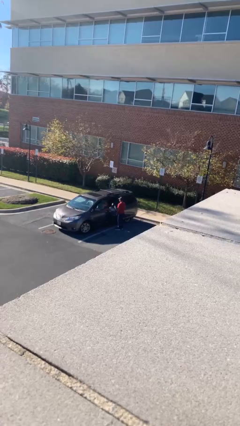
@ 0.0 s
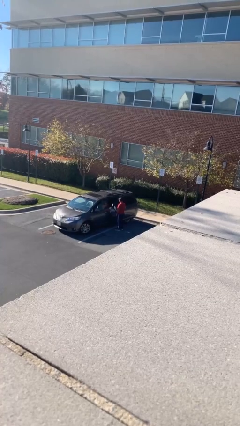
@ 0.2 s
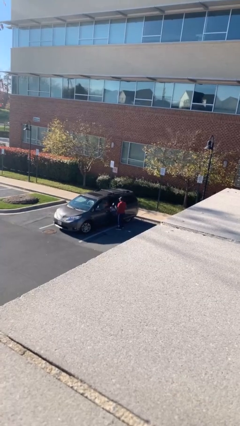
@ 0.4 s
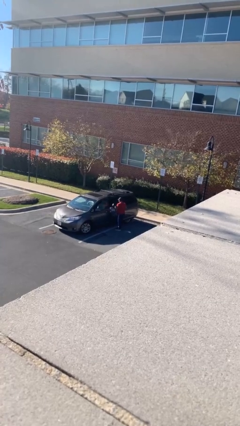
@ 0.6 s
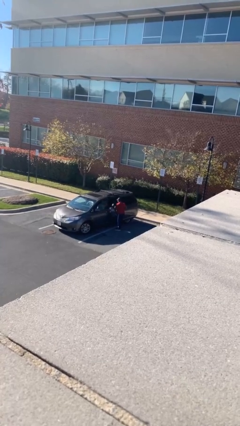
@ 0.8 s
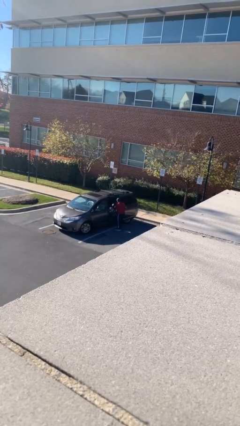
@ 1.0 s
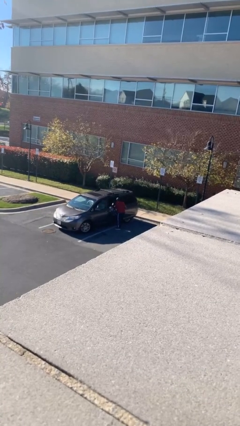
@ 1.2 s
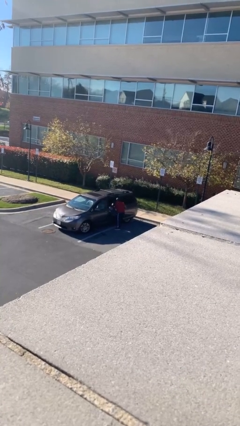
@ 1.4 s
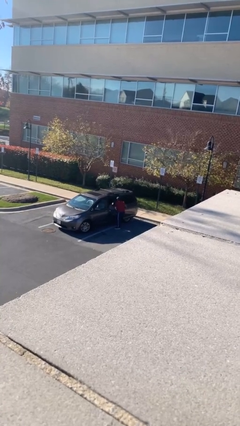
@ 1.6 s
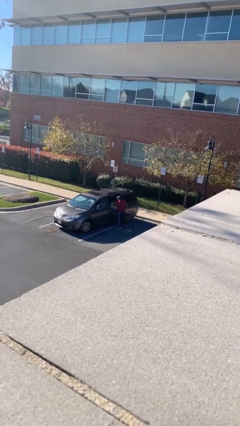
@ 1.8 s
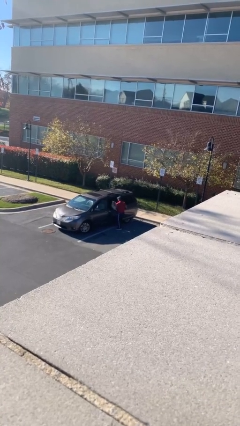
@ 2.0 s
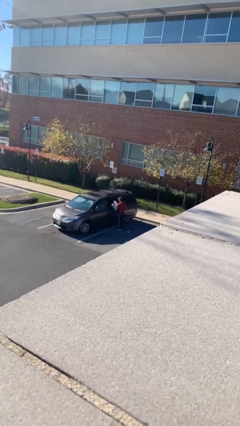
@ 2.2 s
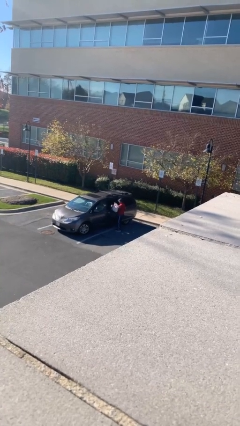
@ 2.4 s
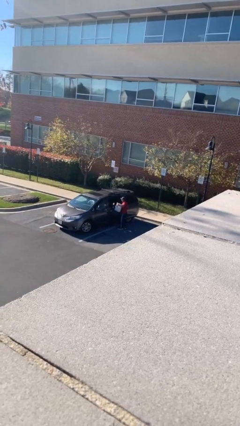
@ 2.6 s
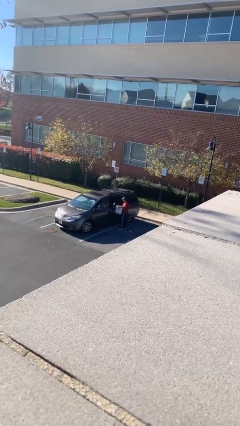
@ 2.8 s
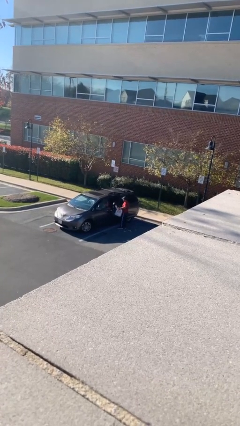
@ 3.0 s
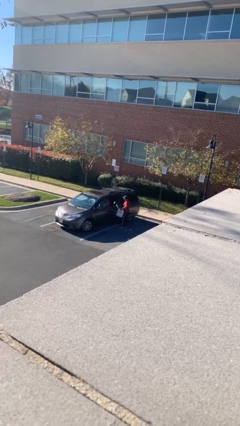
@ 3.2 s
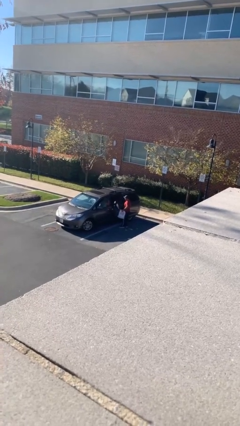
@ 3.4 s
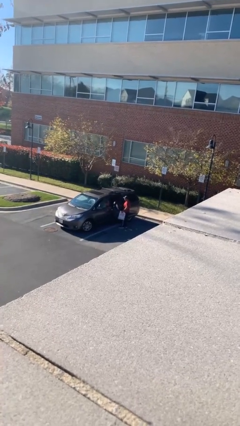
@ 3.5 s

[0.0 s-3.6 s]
person unloads car

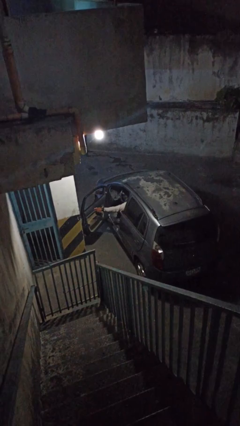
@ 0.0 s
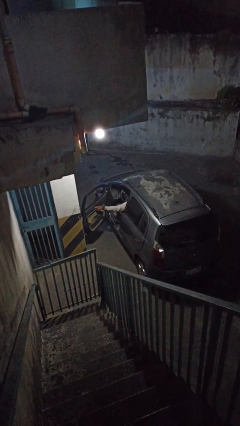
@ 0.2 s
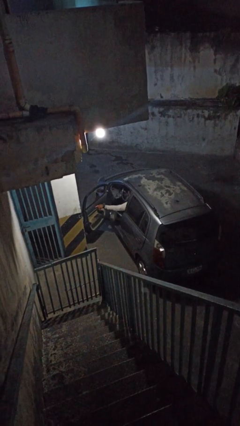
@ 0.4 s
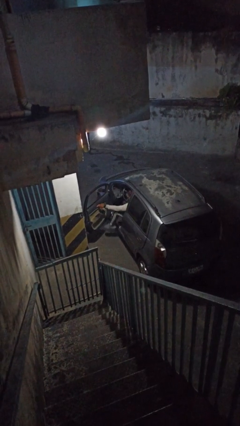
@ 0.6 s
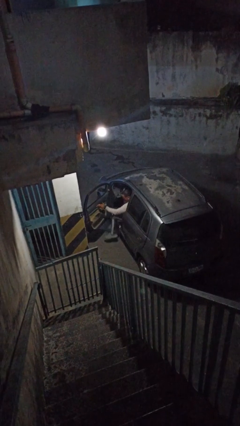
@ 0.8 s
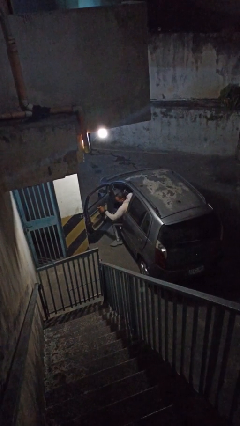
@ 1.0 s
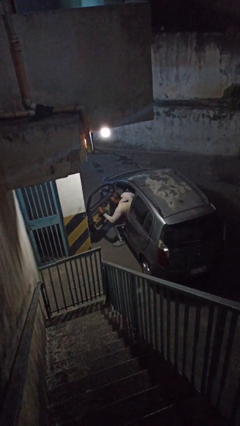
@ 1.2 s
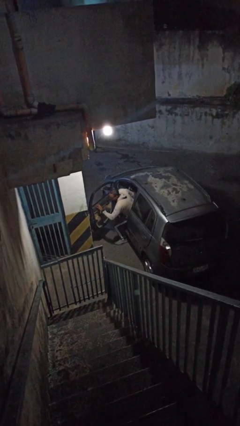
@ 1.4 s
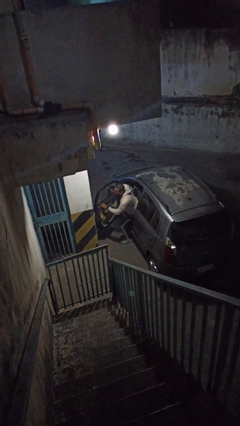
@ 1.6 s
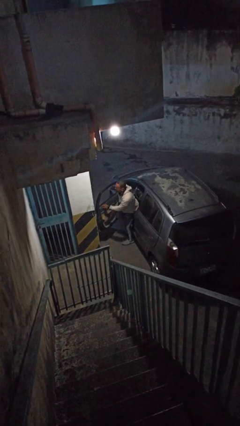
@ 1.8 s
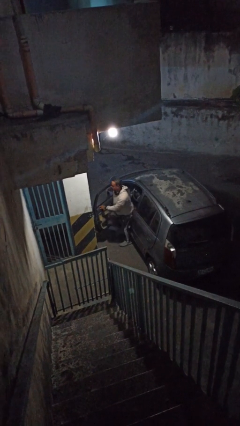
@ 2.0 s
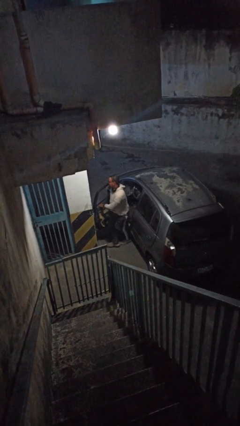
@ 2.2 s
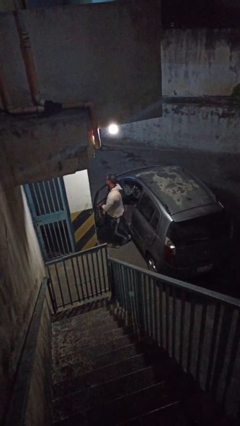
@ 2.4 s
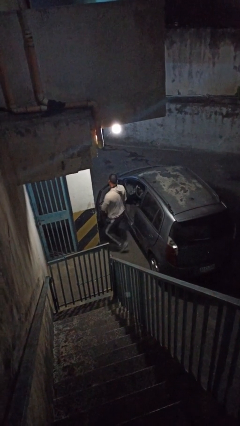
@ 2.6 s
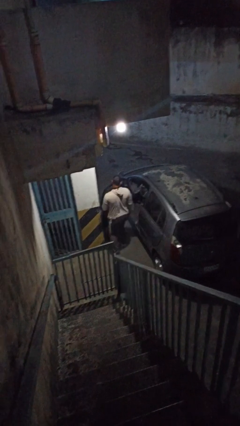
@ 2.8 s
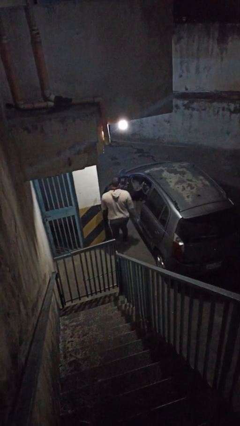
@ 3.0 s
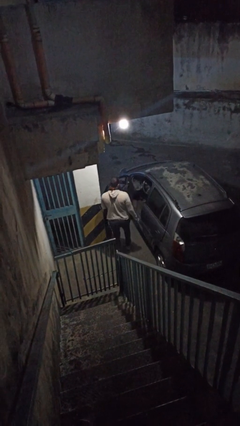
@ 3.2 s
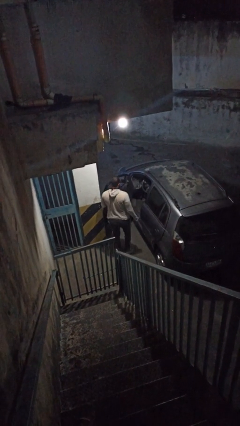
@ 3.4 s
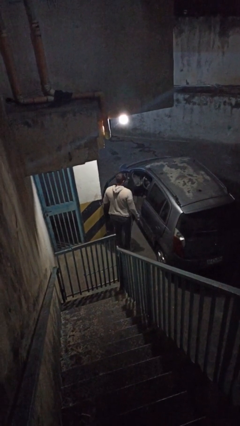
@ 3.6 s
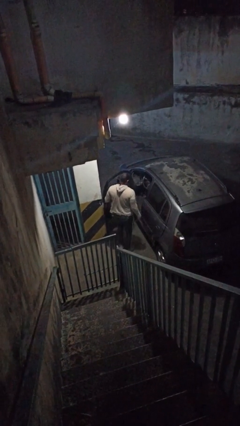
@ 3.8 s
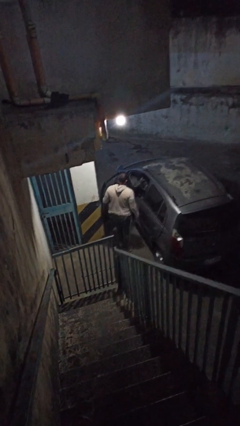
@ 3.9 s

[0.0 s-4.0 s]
person exits car

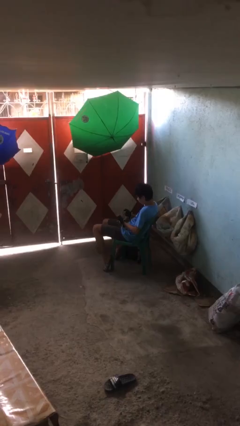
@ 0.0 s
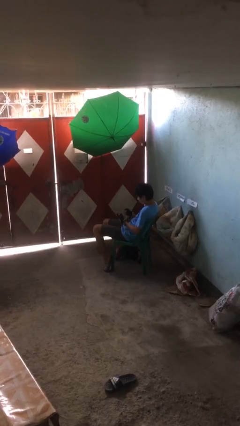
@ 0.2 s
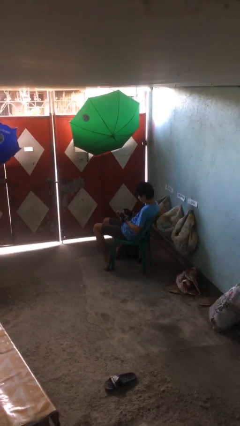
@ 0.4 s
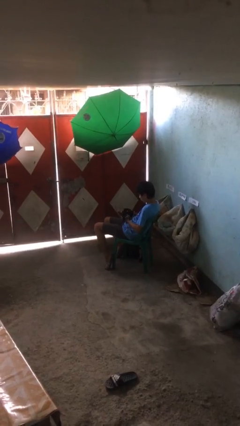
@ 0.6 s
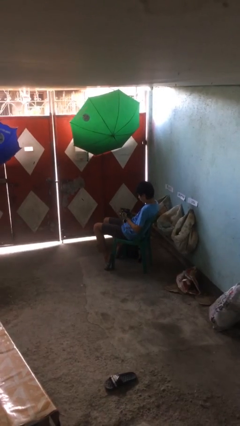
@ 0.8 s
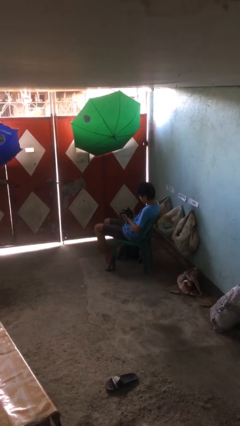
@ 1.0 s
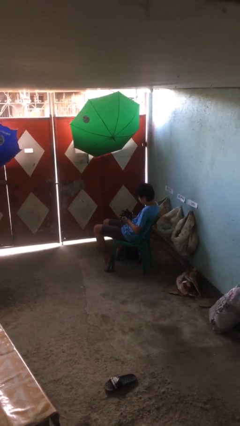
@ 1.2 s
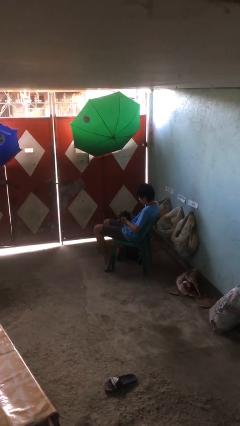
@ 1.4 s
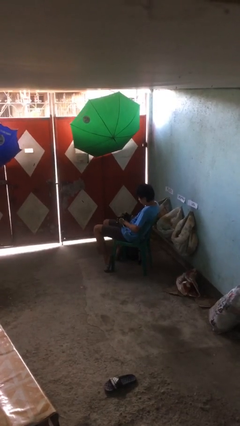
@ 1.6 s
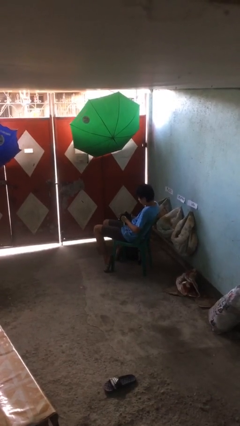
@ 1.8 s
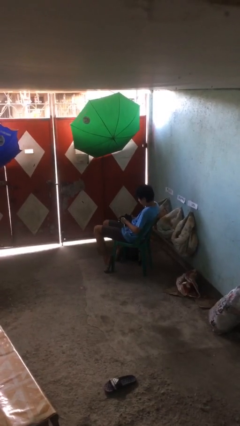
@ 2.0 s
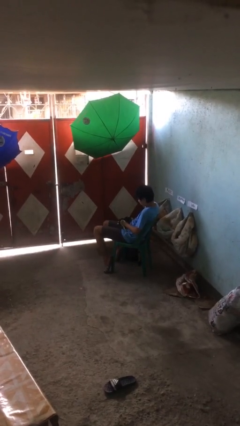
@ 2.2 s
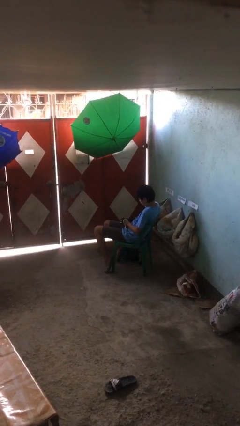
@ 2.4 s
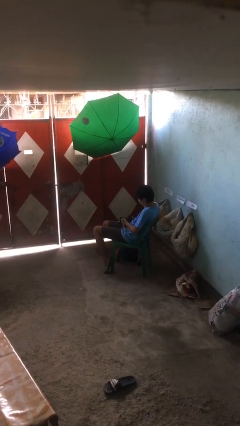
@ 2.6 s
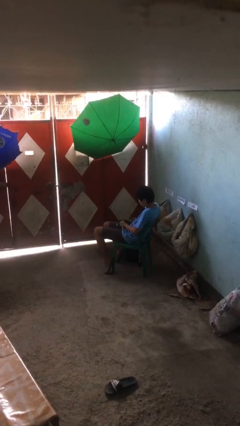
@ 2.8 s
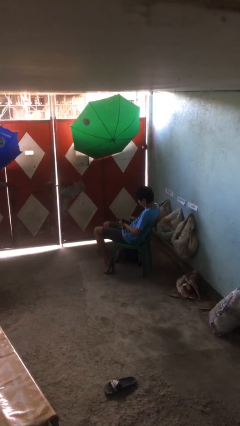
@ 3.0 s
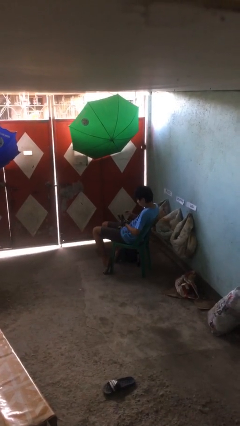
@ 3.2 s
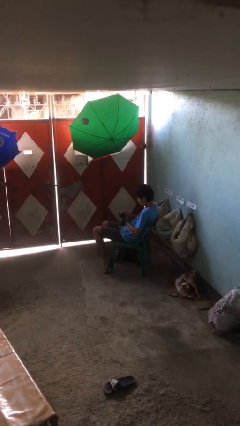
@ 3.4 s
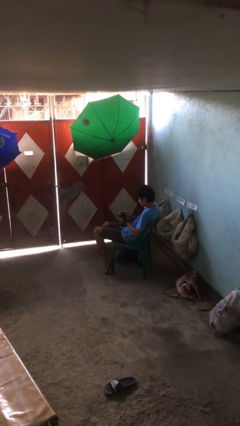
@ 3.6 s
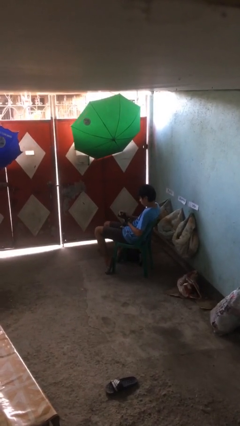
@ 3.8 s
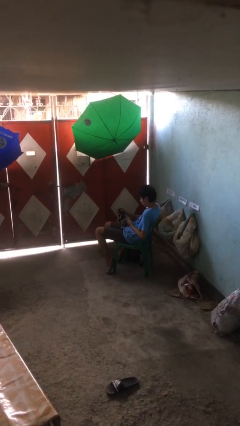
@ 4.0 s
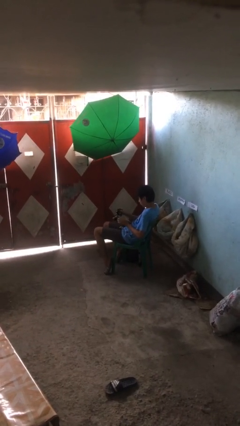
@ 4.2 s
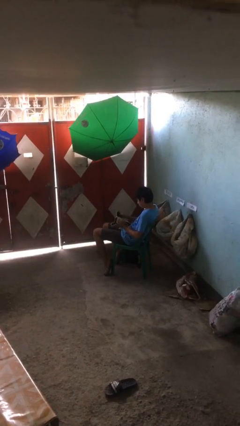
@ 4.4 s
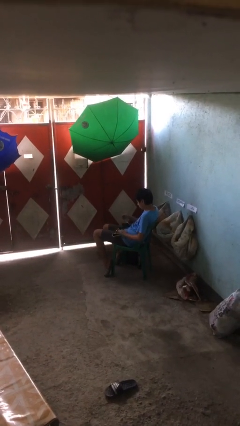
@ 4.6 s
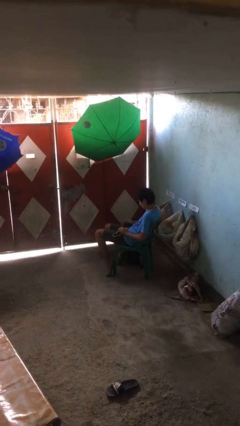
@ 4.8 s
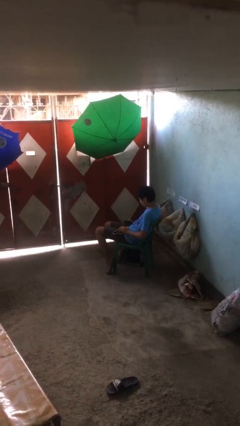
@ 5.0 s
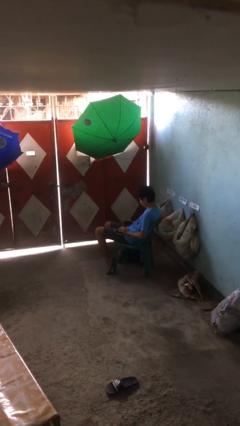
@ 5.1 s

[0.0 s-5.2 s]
person takes off gloves

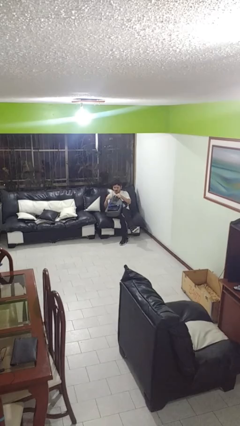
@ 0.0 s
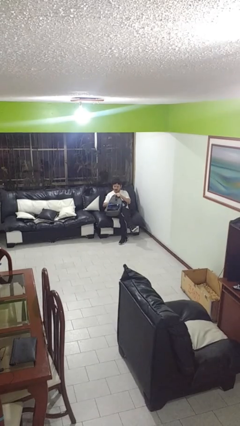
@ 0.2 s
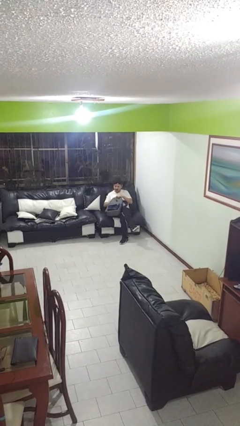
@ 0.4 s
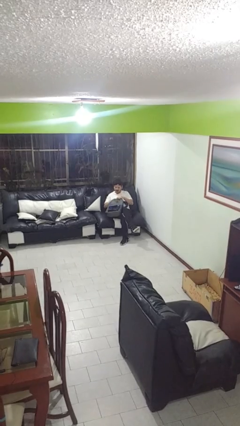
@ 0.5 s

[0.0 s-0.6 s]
person puts object into backpack

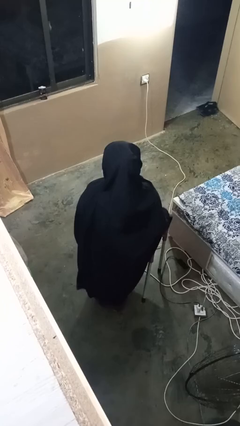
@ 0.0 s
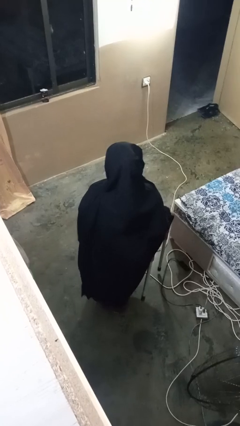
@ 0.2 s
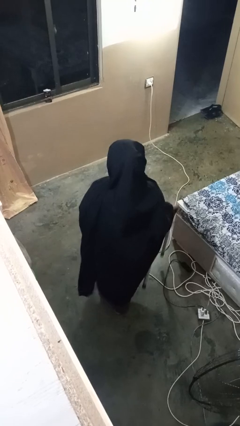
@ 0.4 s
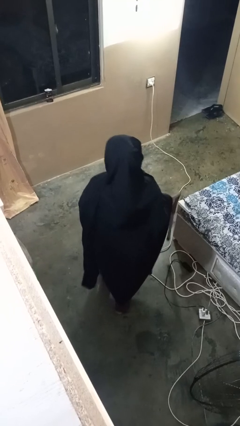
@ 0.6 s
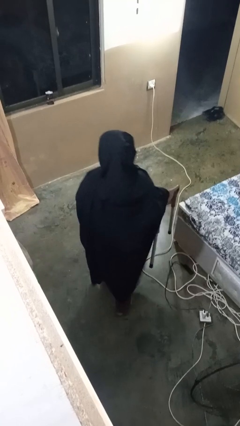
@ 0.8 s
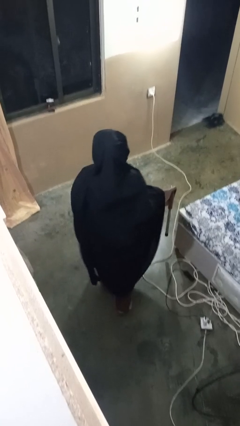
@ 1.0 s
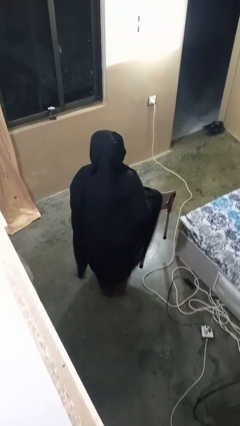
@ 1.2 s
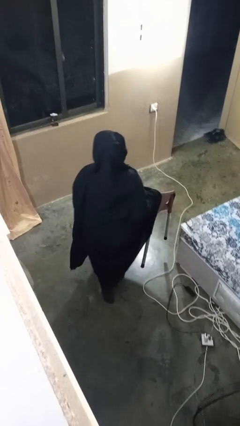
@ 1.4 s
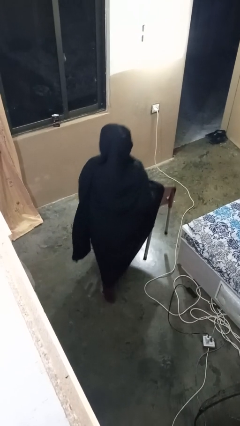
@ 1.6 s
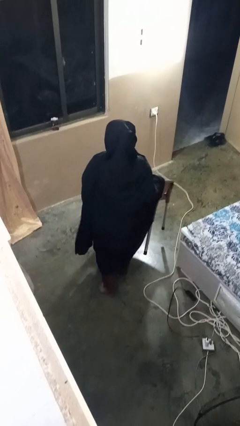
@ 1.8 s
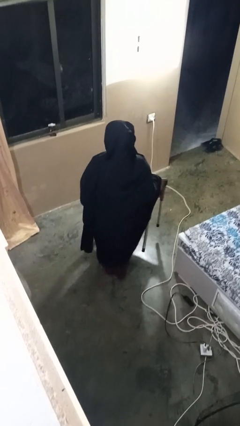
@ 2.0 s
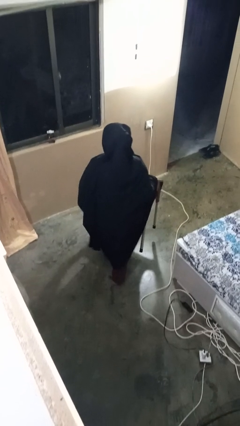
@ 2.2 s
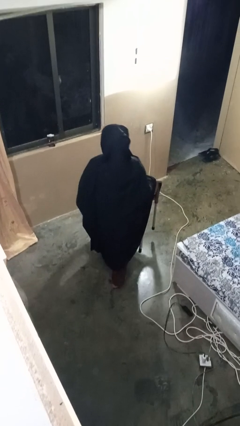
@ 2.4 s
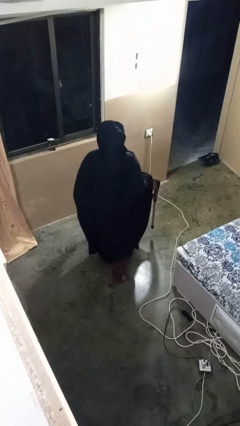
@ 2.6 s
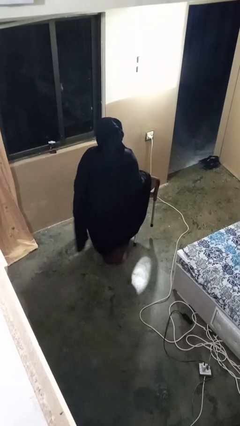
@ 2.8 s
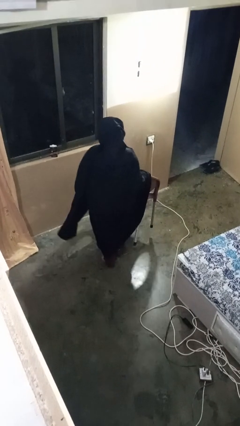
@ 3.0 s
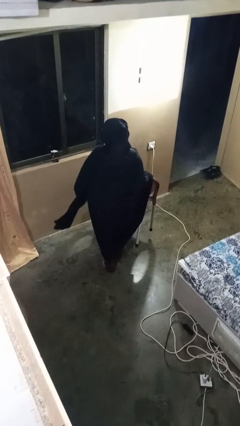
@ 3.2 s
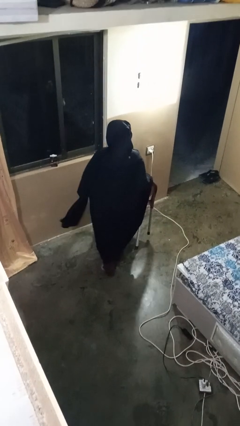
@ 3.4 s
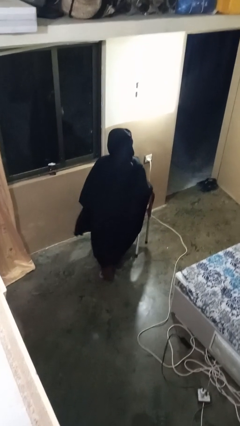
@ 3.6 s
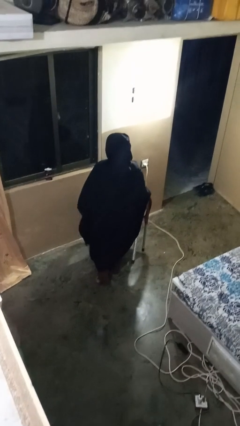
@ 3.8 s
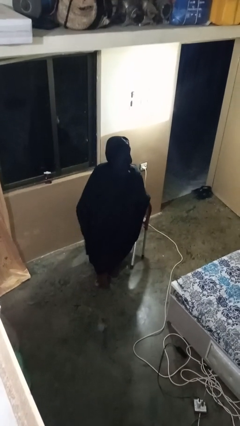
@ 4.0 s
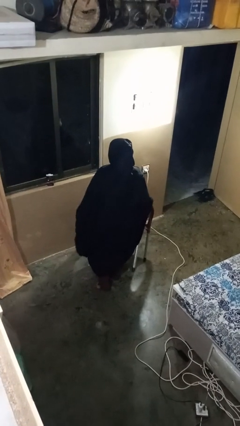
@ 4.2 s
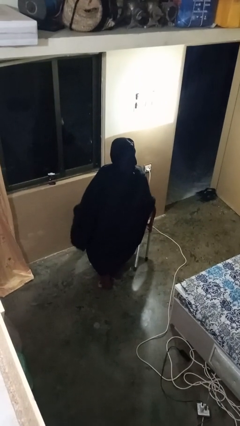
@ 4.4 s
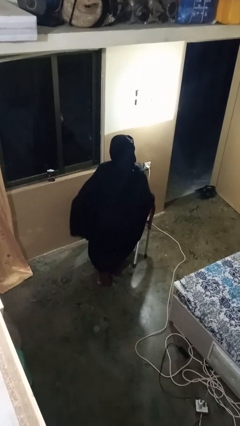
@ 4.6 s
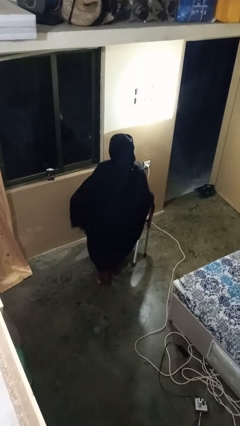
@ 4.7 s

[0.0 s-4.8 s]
person carries furniture
